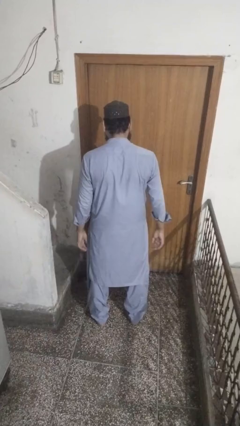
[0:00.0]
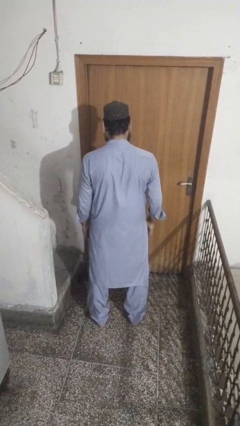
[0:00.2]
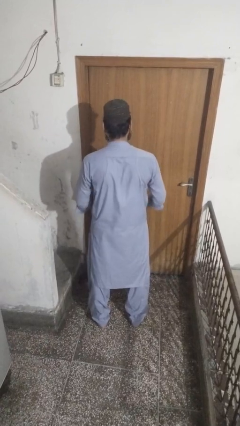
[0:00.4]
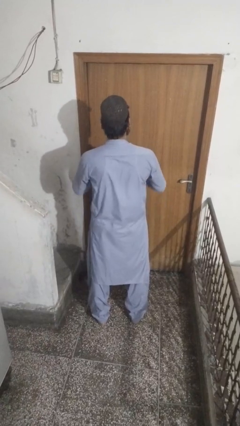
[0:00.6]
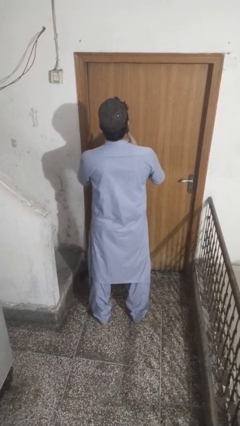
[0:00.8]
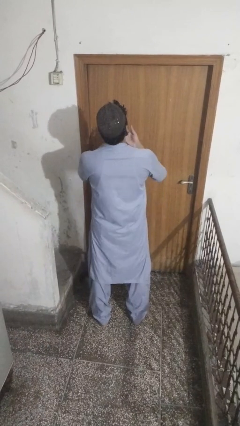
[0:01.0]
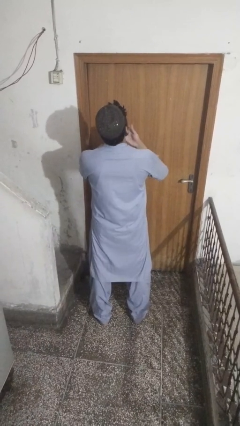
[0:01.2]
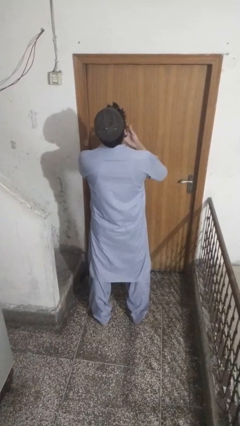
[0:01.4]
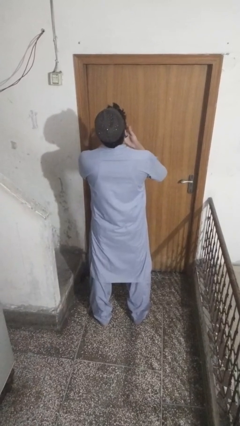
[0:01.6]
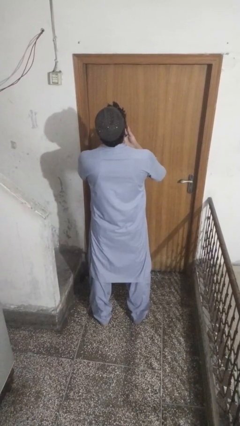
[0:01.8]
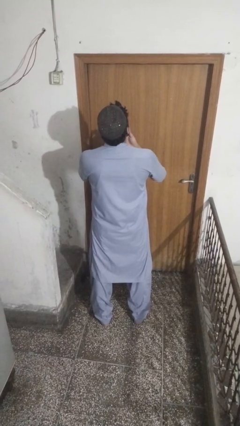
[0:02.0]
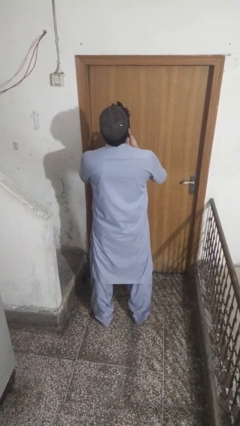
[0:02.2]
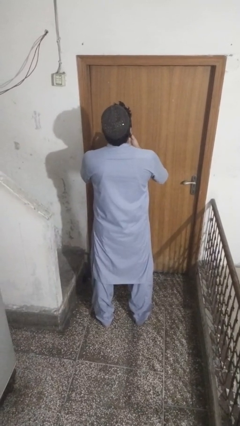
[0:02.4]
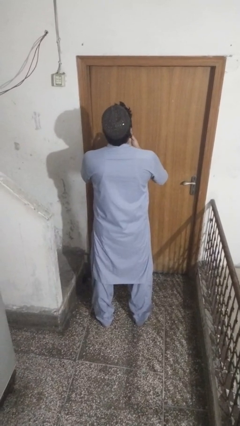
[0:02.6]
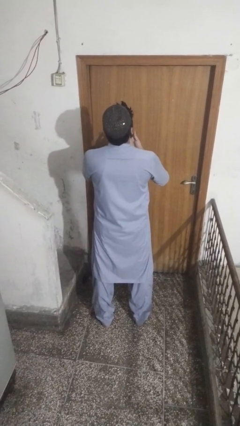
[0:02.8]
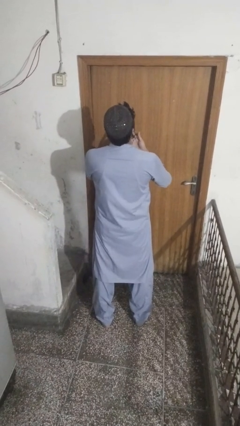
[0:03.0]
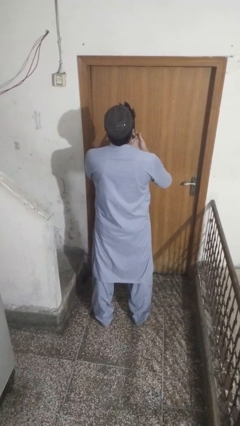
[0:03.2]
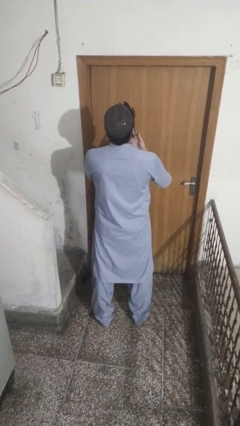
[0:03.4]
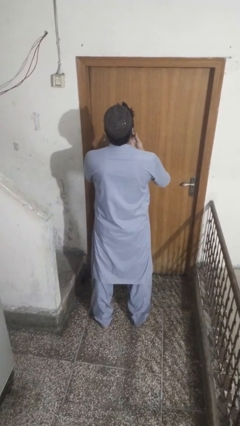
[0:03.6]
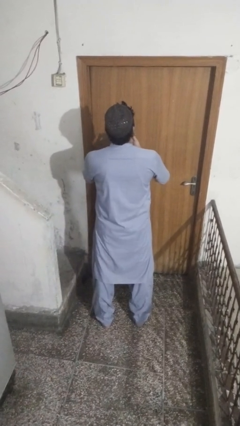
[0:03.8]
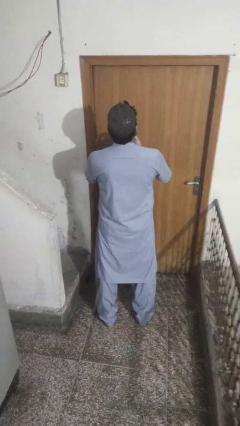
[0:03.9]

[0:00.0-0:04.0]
person prays

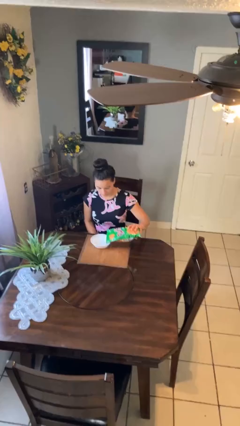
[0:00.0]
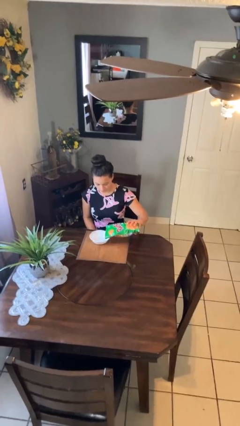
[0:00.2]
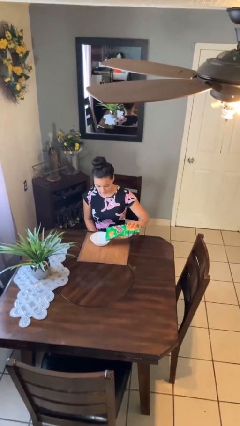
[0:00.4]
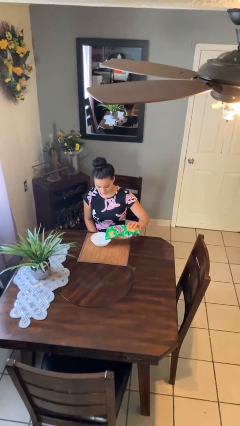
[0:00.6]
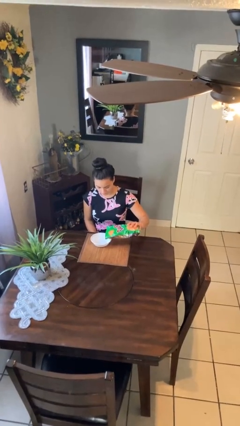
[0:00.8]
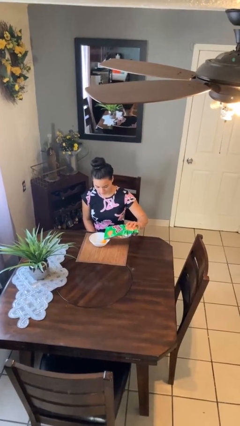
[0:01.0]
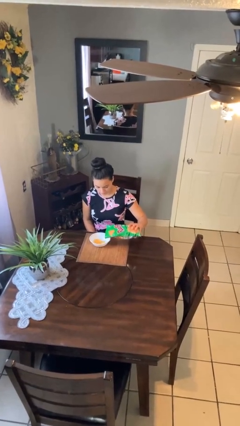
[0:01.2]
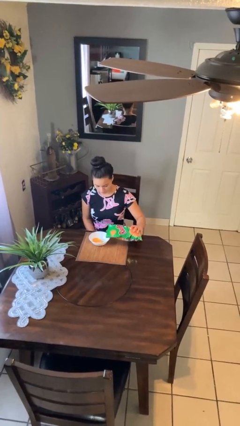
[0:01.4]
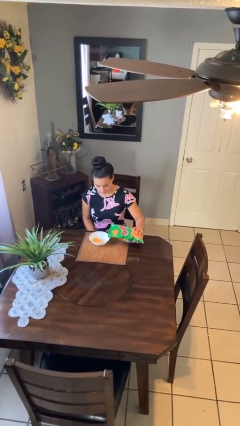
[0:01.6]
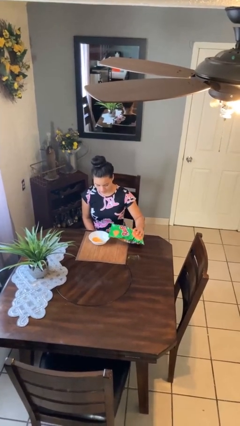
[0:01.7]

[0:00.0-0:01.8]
person pours into bowl

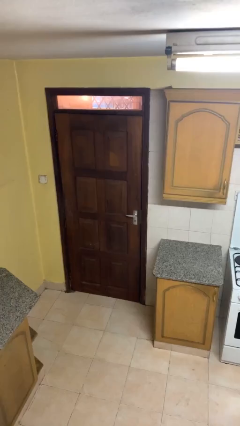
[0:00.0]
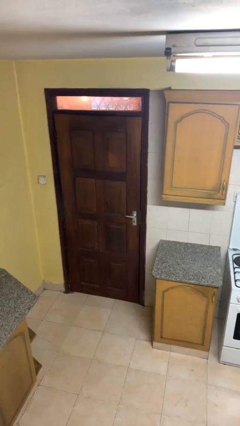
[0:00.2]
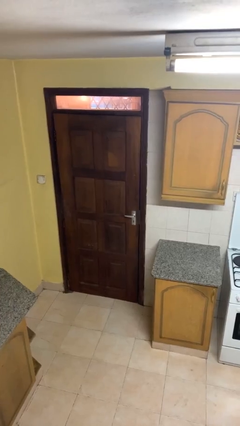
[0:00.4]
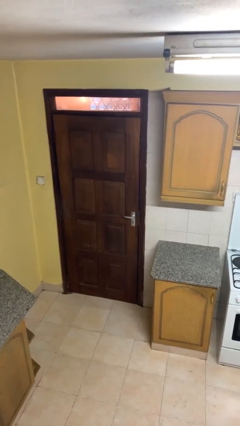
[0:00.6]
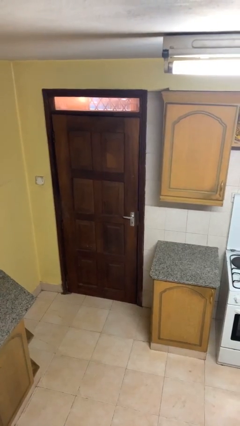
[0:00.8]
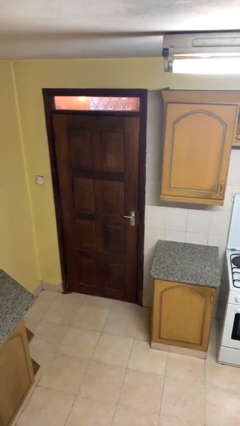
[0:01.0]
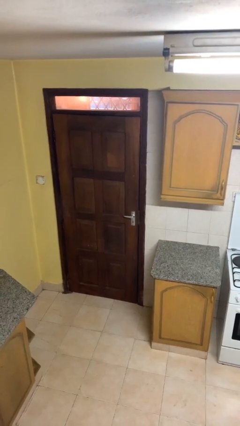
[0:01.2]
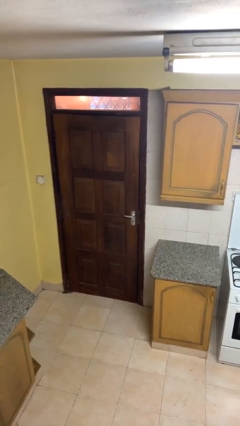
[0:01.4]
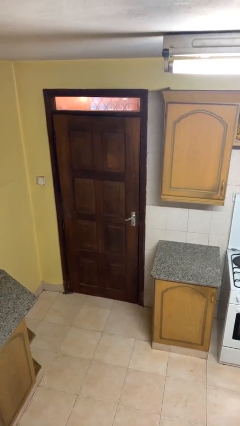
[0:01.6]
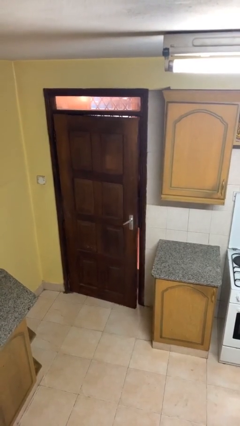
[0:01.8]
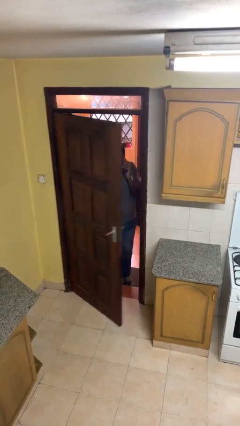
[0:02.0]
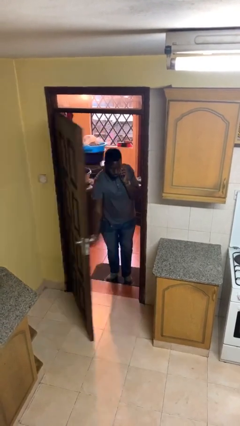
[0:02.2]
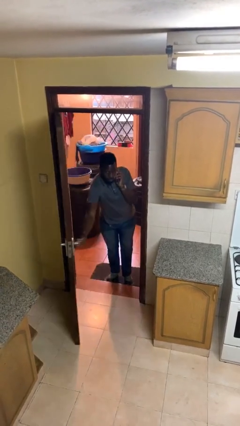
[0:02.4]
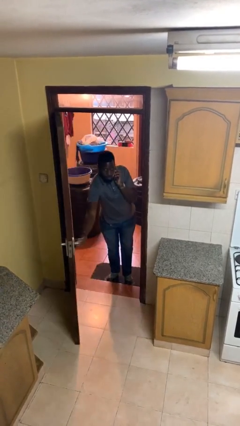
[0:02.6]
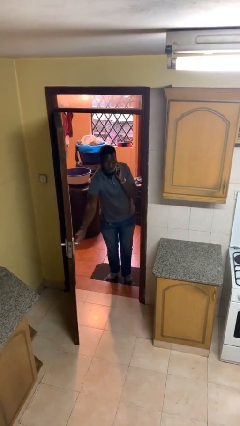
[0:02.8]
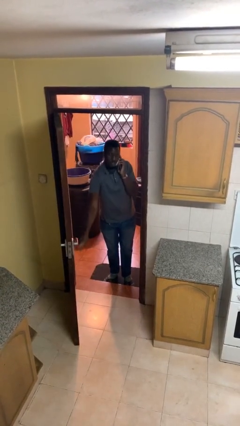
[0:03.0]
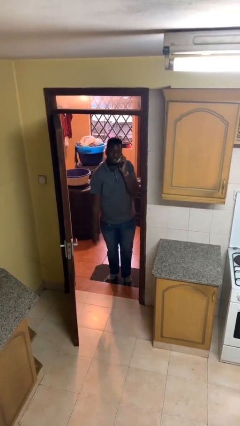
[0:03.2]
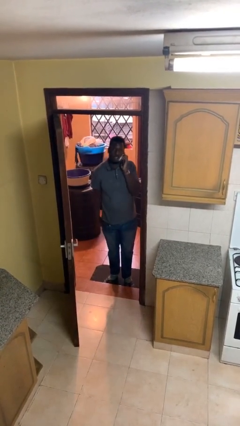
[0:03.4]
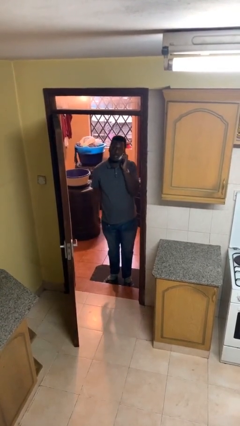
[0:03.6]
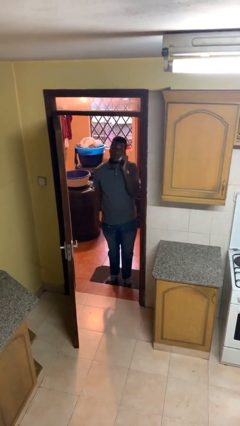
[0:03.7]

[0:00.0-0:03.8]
person opens facility door

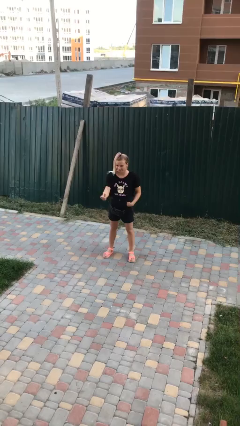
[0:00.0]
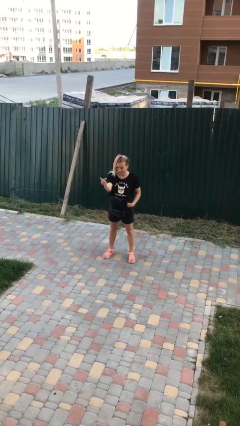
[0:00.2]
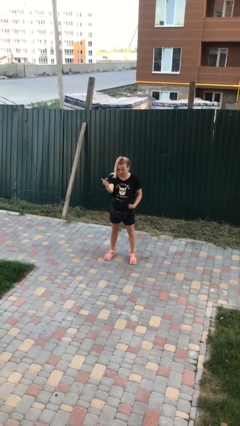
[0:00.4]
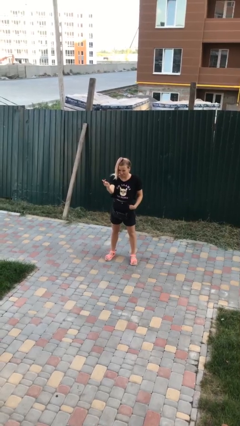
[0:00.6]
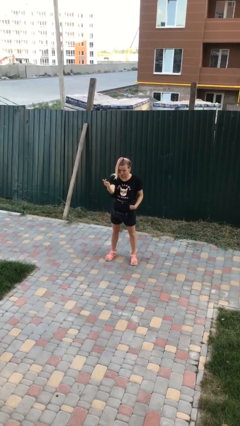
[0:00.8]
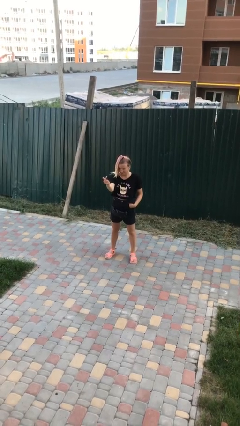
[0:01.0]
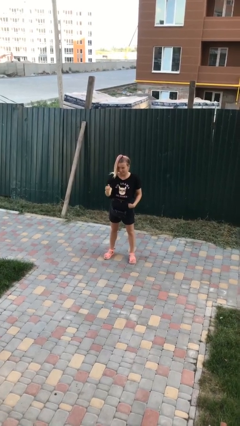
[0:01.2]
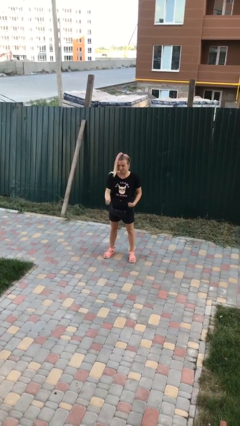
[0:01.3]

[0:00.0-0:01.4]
person gestures come here

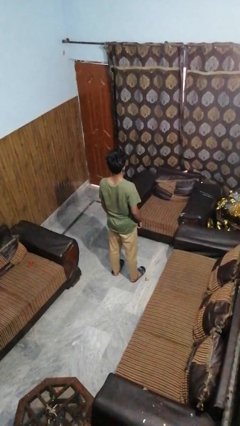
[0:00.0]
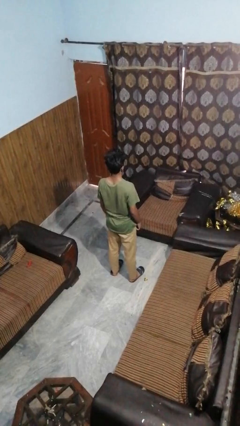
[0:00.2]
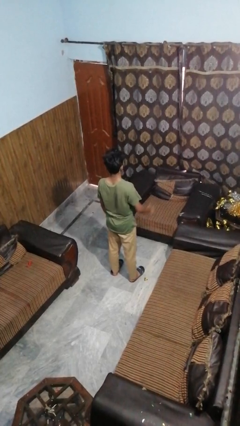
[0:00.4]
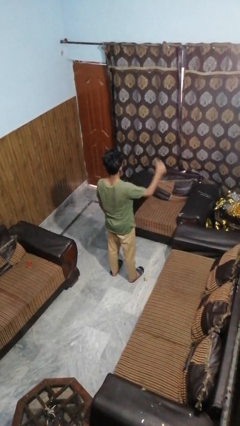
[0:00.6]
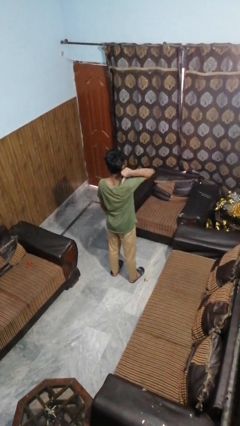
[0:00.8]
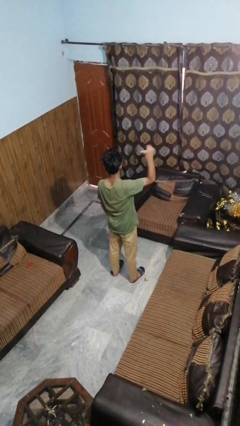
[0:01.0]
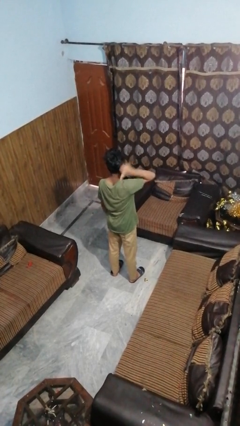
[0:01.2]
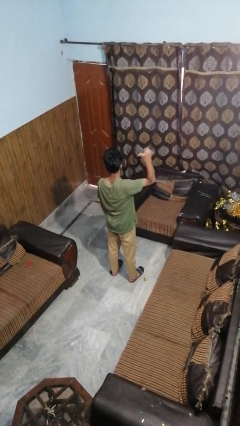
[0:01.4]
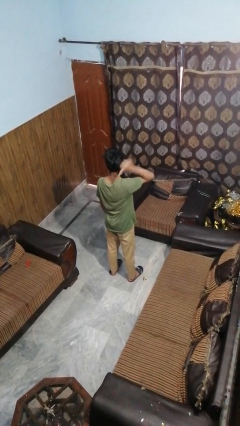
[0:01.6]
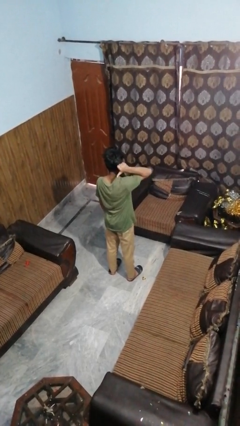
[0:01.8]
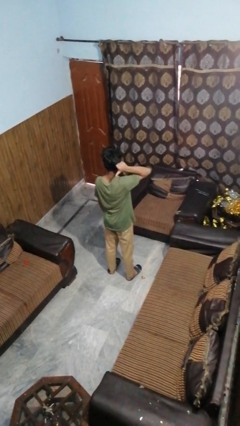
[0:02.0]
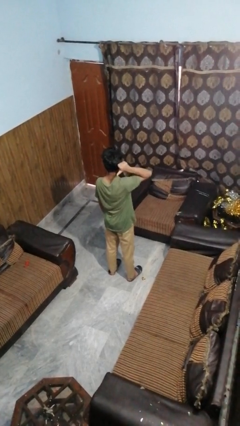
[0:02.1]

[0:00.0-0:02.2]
person gestures behind me

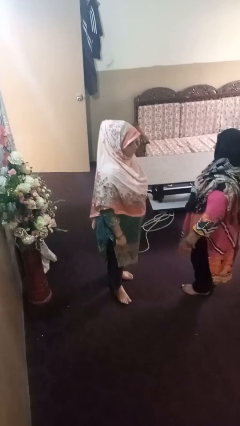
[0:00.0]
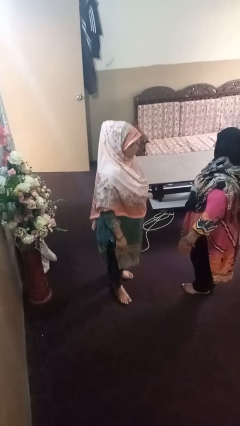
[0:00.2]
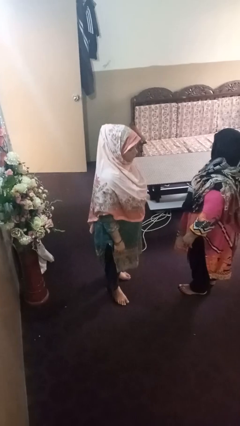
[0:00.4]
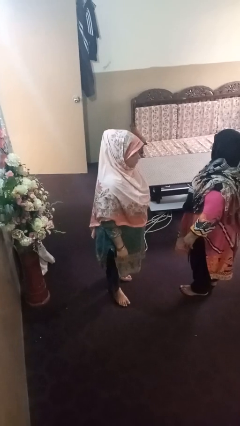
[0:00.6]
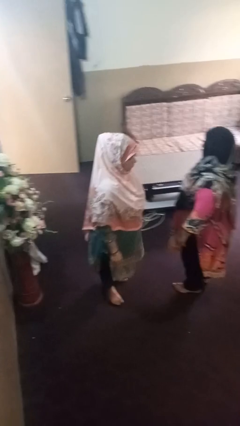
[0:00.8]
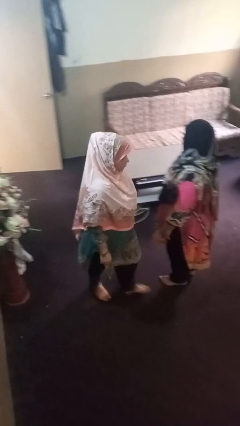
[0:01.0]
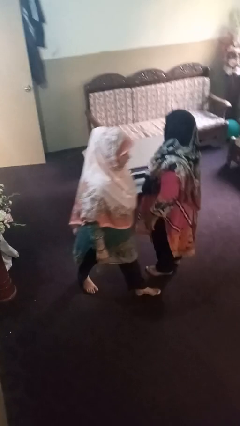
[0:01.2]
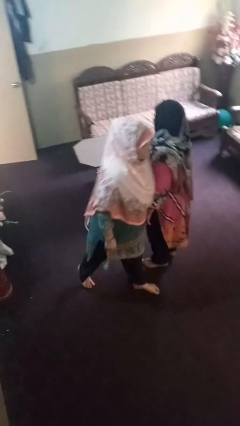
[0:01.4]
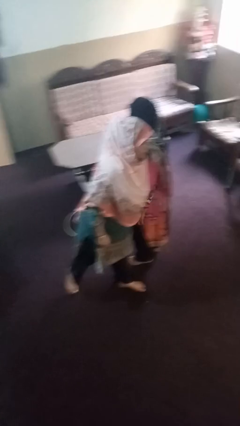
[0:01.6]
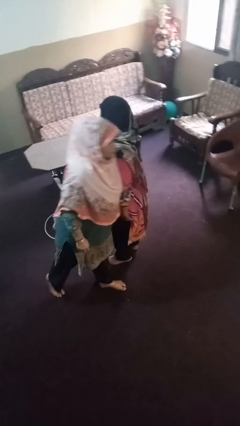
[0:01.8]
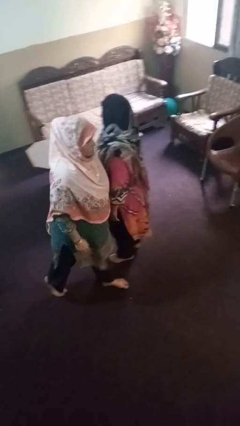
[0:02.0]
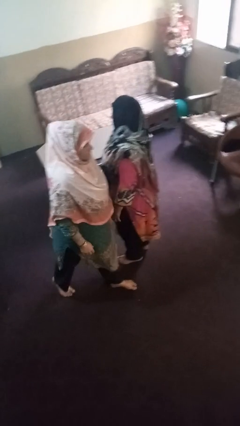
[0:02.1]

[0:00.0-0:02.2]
person shoves person

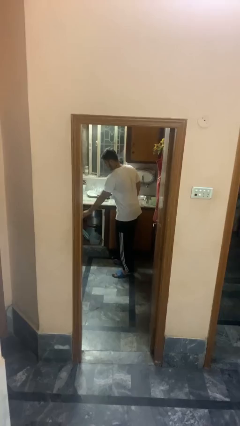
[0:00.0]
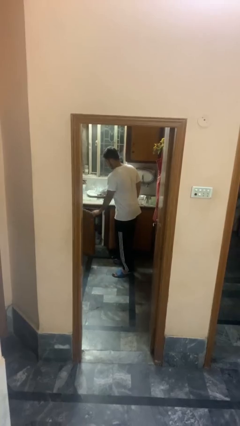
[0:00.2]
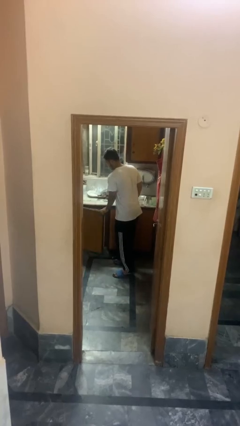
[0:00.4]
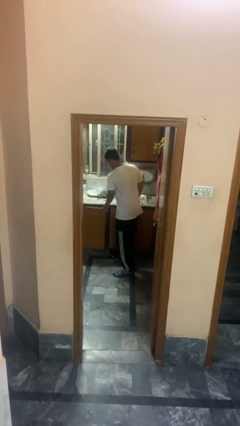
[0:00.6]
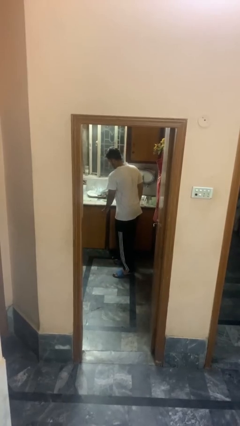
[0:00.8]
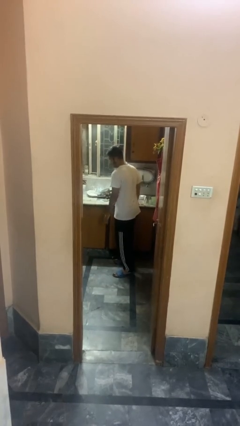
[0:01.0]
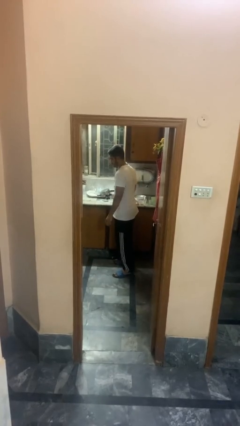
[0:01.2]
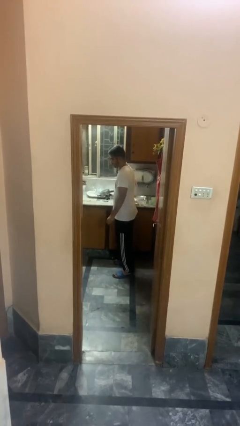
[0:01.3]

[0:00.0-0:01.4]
person closes cabinet

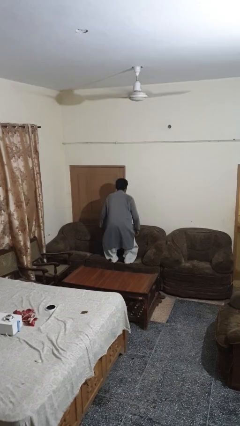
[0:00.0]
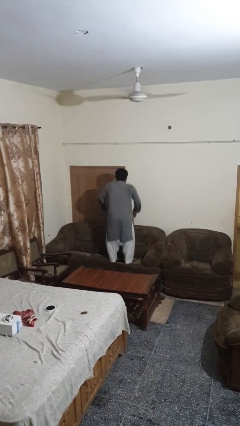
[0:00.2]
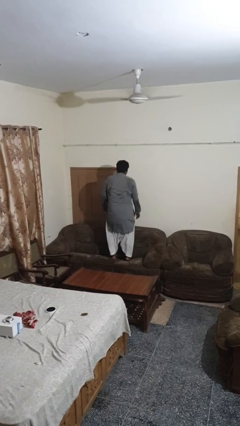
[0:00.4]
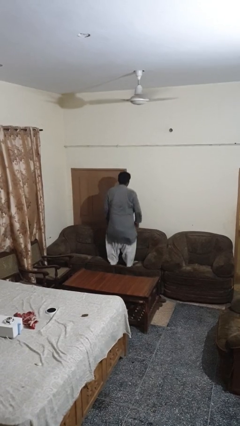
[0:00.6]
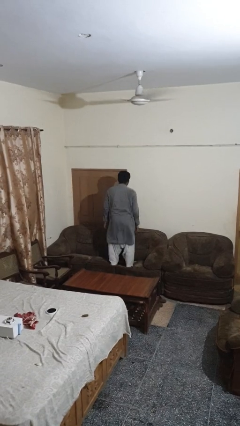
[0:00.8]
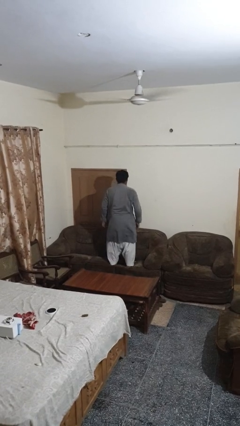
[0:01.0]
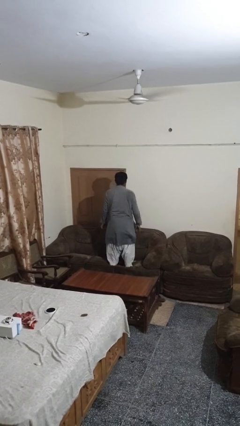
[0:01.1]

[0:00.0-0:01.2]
person jumps on couch
